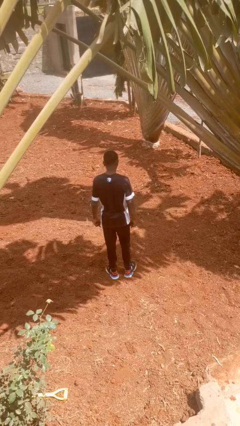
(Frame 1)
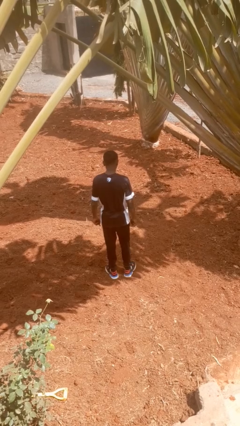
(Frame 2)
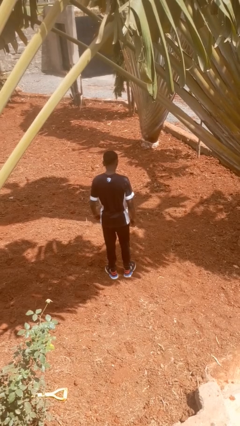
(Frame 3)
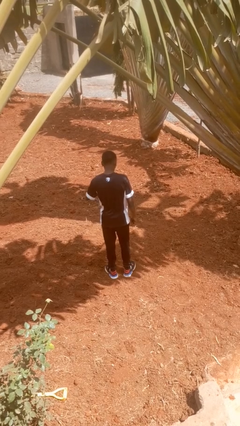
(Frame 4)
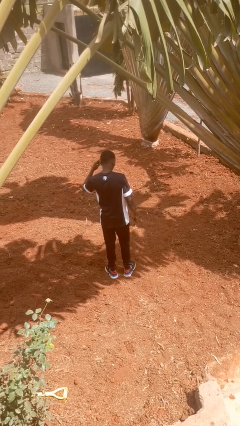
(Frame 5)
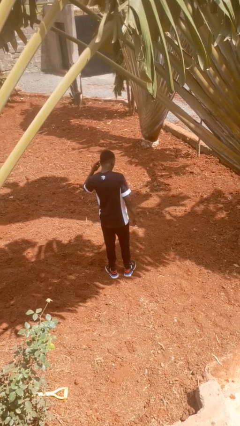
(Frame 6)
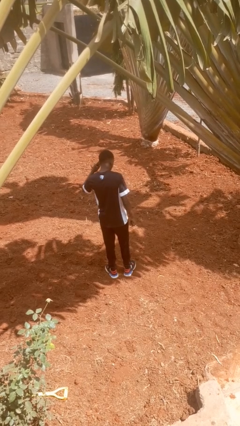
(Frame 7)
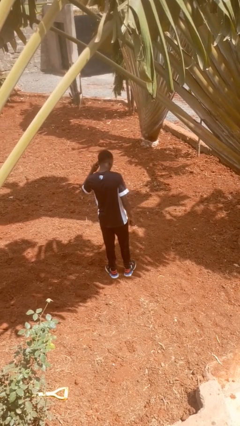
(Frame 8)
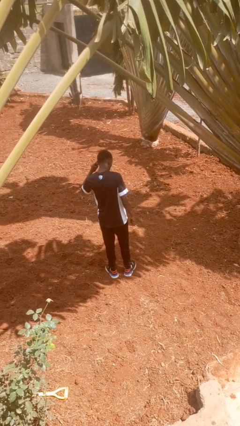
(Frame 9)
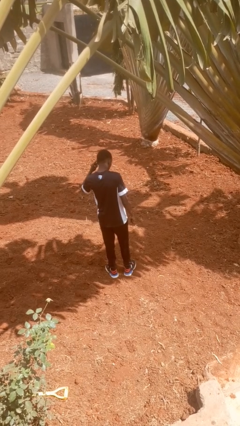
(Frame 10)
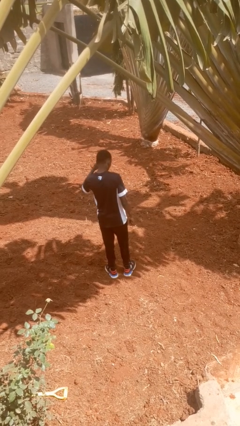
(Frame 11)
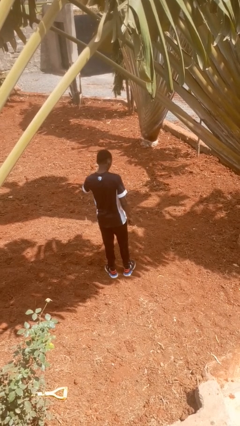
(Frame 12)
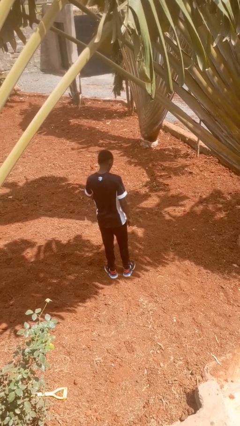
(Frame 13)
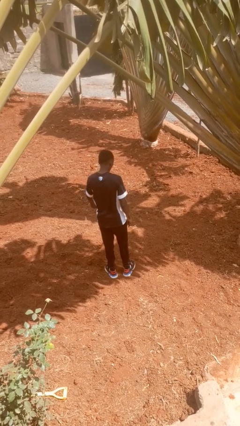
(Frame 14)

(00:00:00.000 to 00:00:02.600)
person gestures listen closely

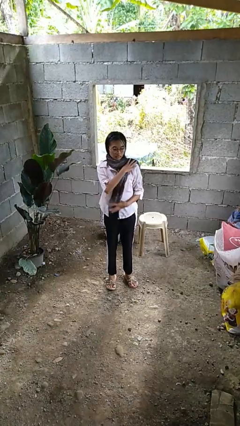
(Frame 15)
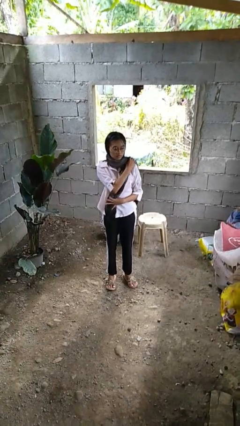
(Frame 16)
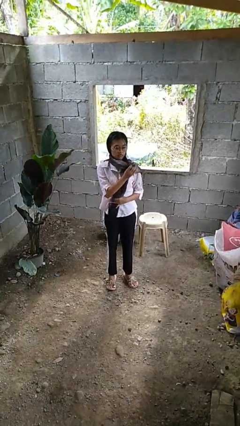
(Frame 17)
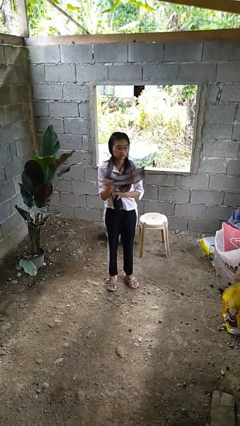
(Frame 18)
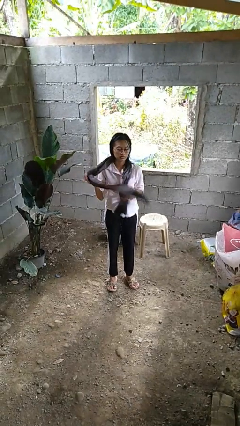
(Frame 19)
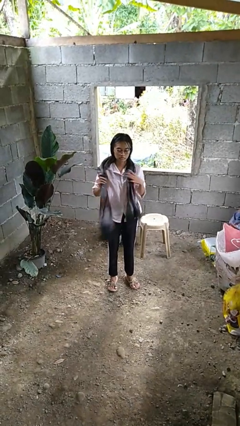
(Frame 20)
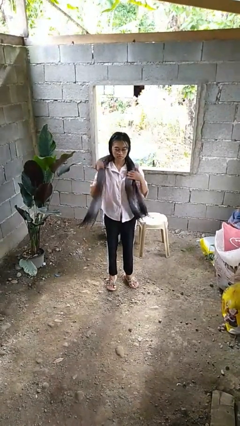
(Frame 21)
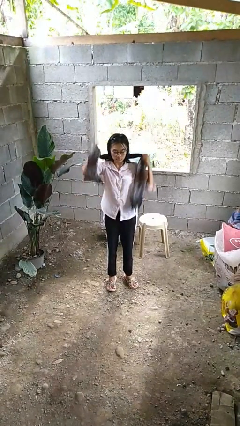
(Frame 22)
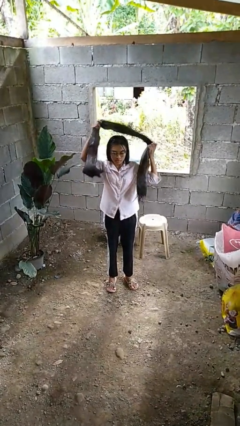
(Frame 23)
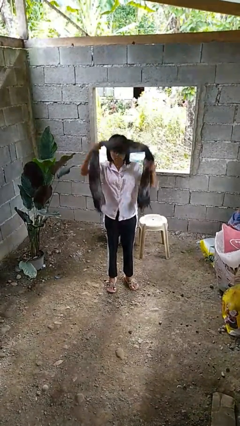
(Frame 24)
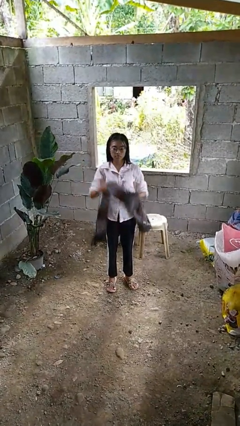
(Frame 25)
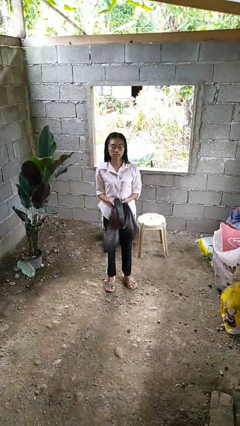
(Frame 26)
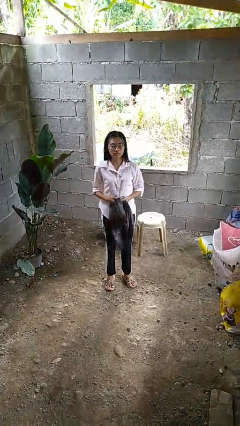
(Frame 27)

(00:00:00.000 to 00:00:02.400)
person takes off scarf

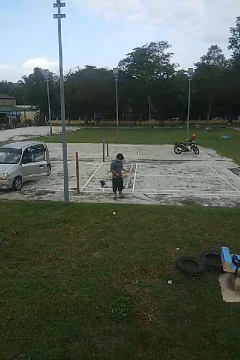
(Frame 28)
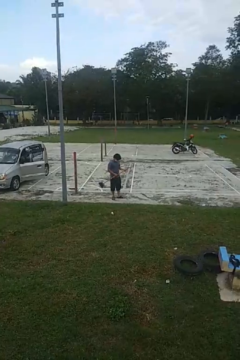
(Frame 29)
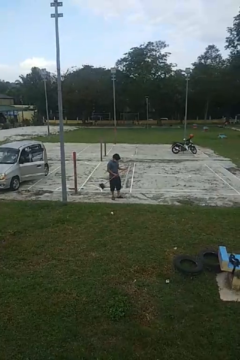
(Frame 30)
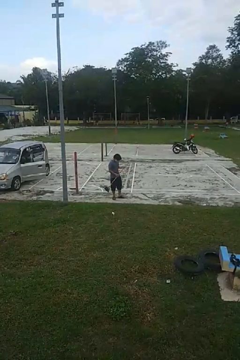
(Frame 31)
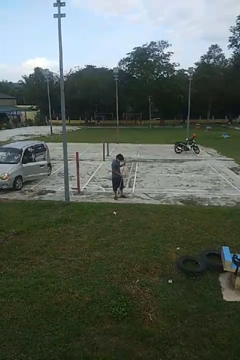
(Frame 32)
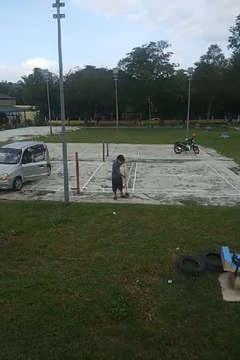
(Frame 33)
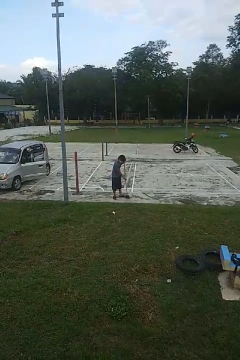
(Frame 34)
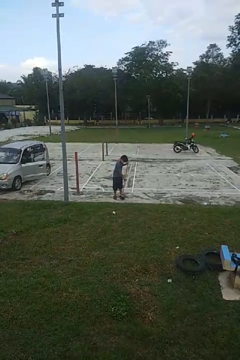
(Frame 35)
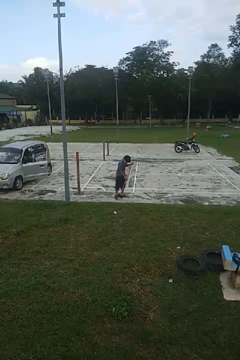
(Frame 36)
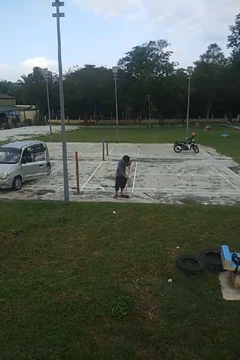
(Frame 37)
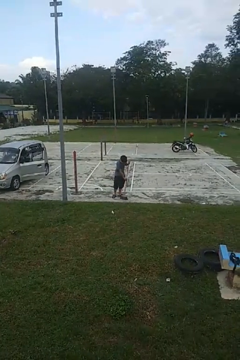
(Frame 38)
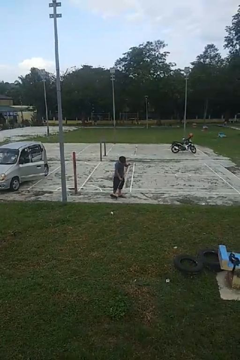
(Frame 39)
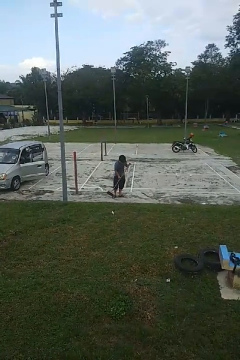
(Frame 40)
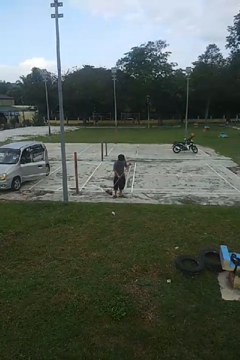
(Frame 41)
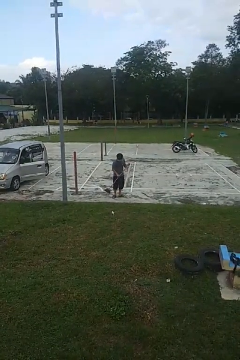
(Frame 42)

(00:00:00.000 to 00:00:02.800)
person sweeps floor

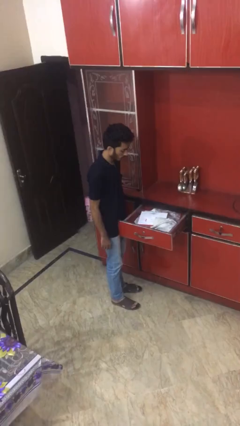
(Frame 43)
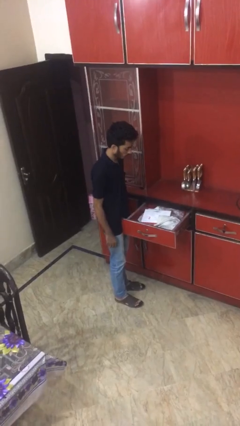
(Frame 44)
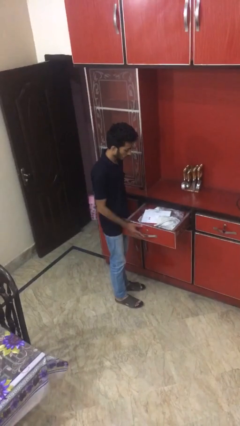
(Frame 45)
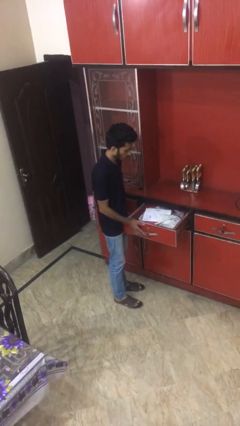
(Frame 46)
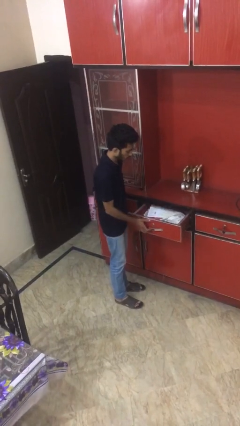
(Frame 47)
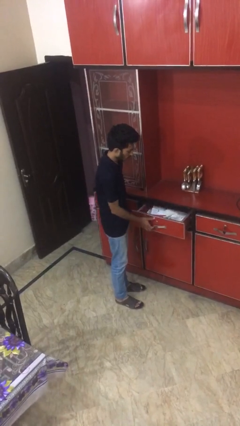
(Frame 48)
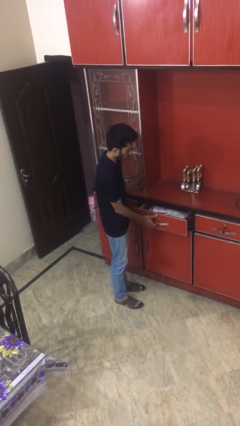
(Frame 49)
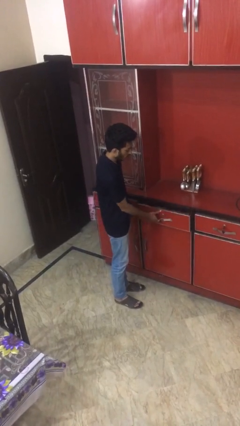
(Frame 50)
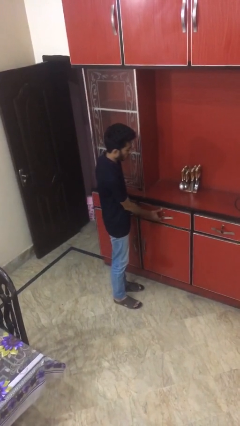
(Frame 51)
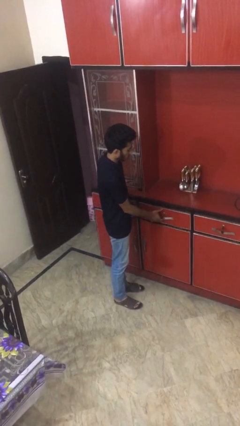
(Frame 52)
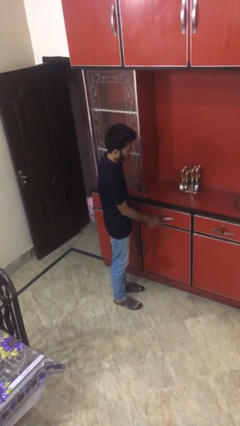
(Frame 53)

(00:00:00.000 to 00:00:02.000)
person closes kitchen drawer

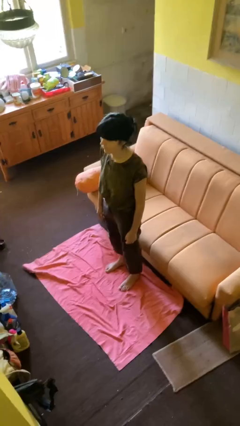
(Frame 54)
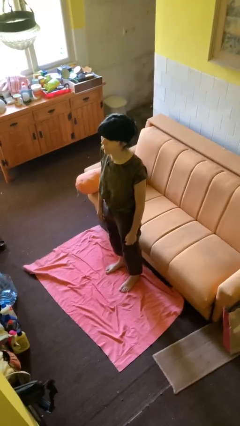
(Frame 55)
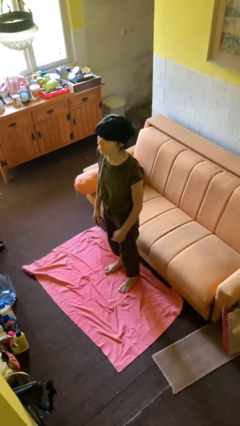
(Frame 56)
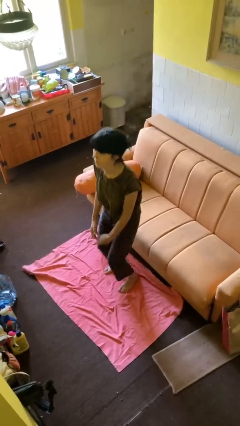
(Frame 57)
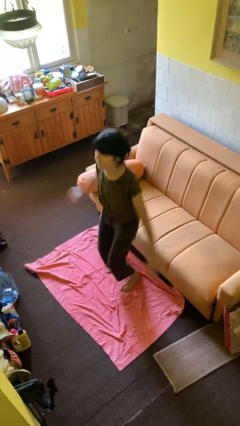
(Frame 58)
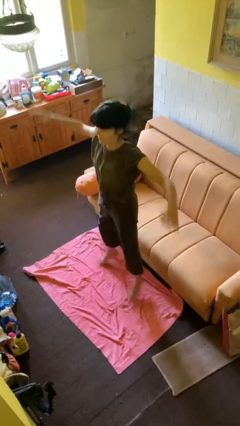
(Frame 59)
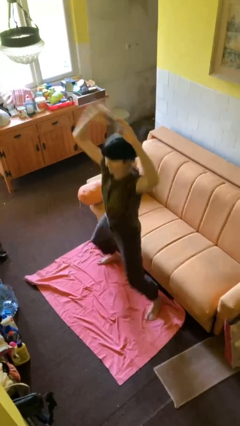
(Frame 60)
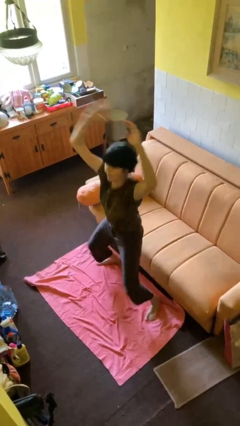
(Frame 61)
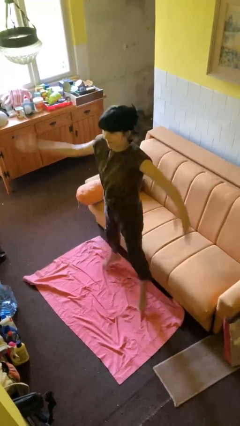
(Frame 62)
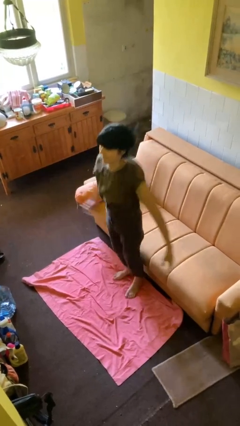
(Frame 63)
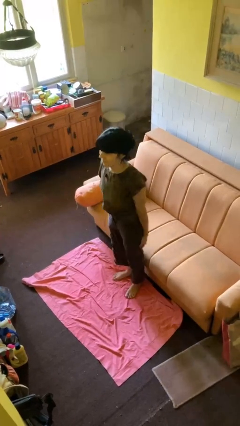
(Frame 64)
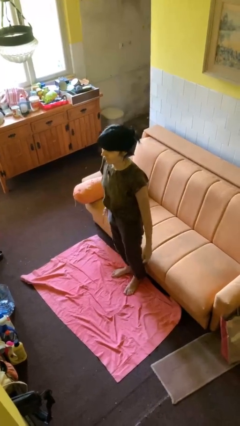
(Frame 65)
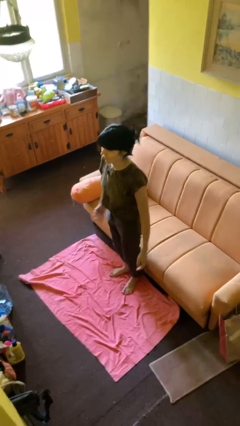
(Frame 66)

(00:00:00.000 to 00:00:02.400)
person exercises with jumping jacks

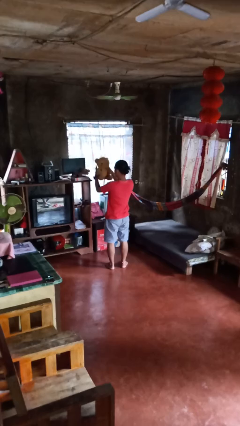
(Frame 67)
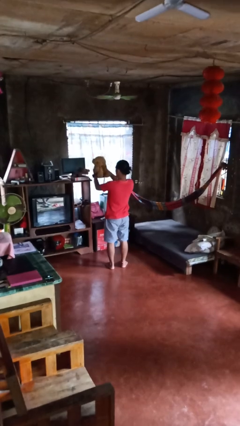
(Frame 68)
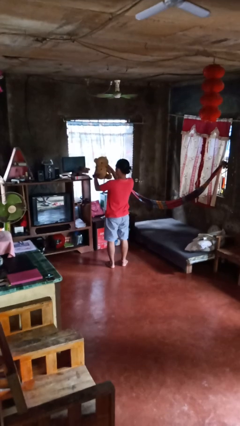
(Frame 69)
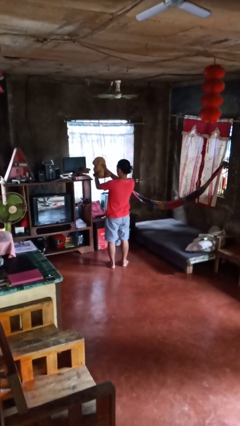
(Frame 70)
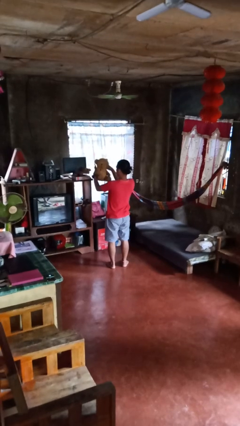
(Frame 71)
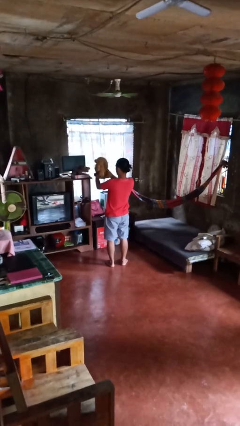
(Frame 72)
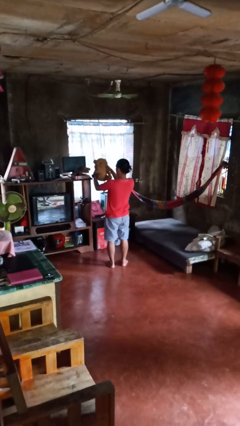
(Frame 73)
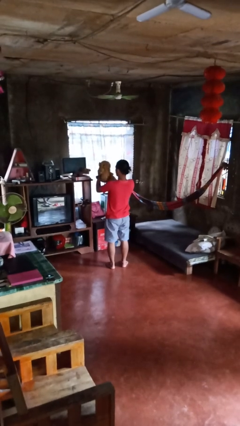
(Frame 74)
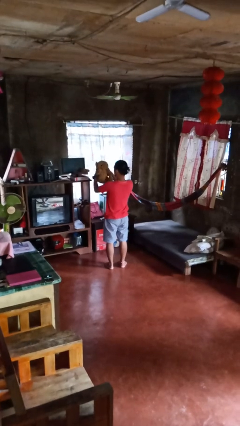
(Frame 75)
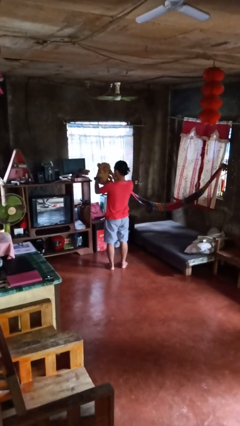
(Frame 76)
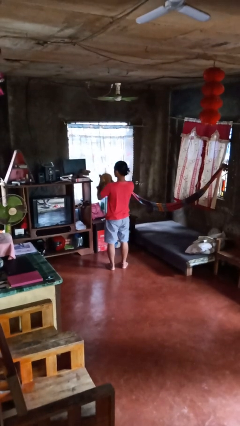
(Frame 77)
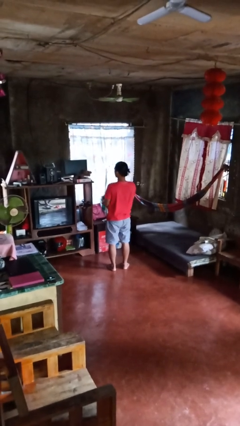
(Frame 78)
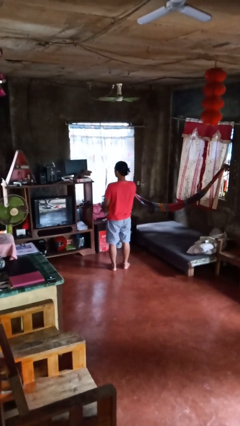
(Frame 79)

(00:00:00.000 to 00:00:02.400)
person squeezes object

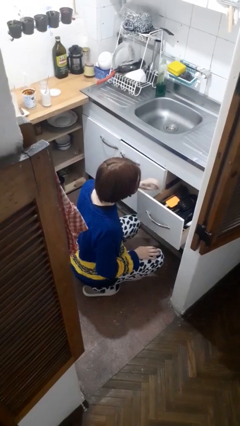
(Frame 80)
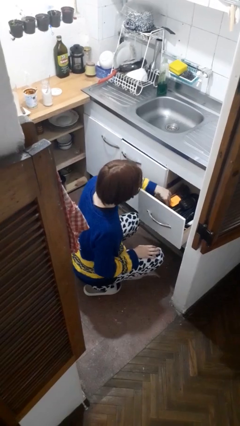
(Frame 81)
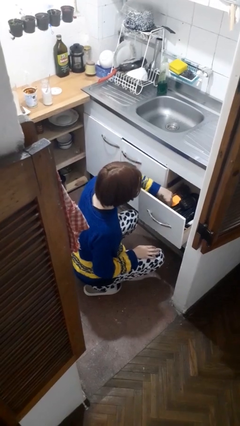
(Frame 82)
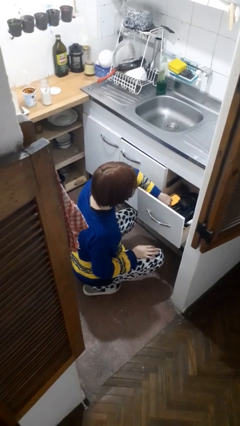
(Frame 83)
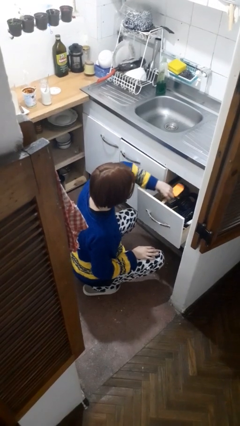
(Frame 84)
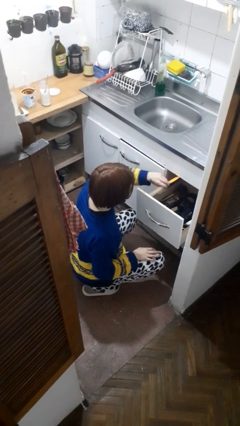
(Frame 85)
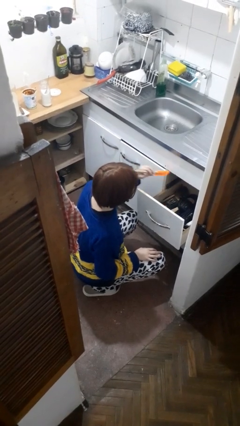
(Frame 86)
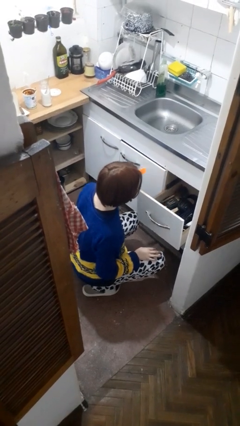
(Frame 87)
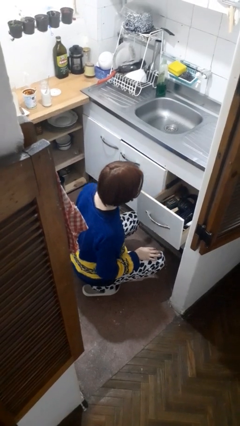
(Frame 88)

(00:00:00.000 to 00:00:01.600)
person takes object from kitchen drawer

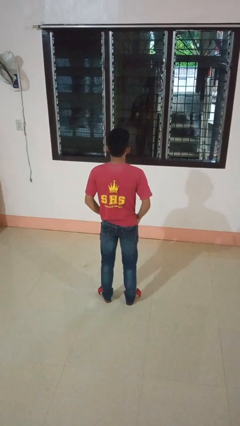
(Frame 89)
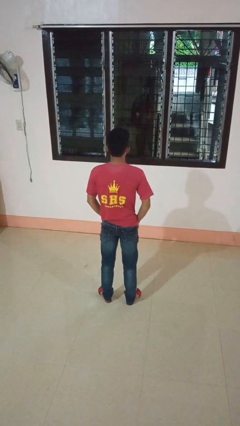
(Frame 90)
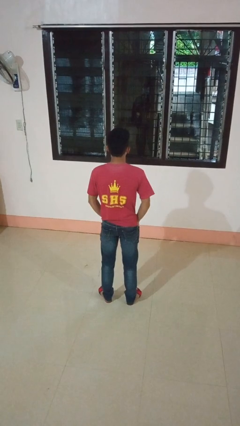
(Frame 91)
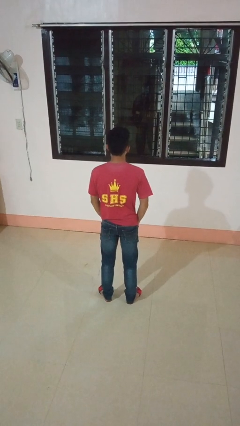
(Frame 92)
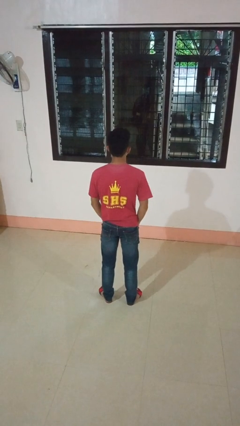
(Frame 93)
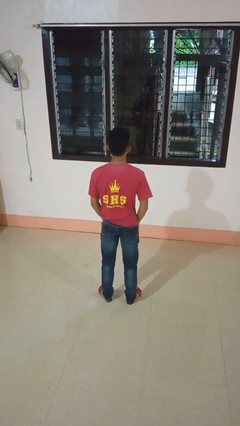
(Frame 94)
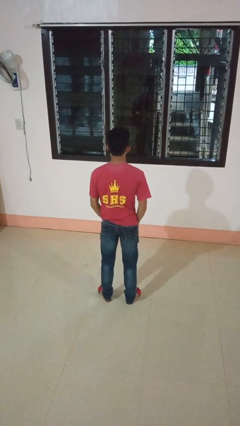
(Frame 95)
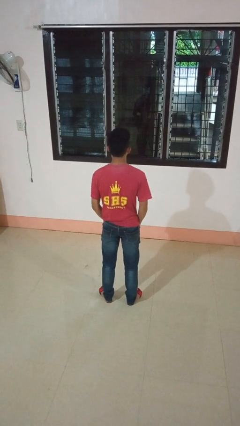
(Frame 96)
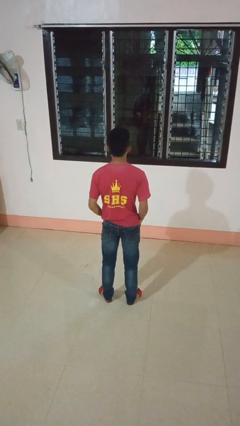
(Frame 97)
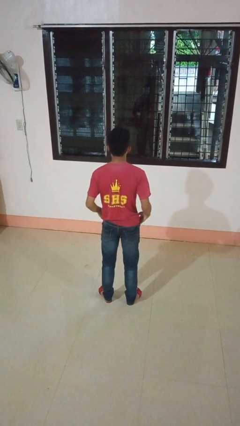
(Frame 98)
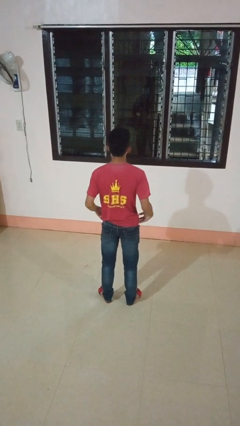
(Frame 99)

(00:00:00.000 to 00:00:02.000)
person puts hands in back pockets
